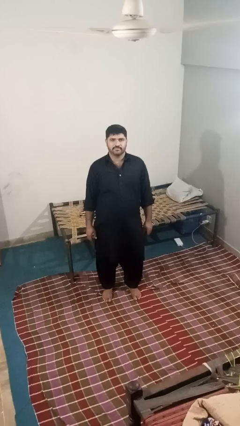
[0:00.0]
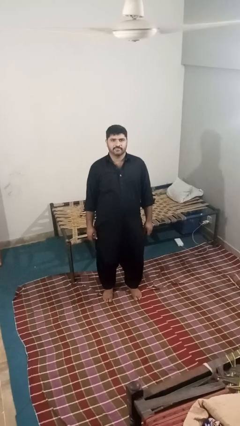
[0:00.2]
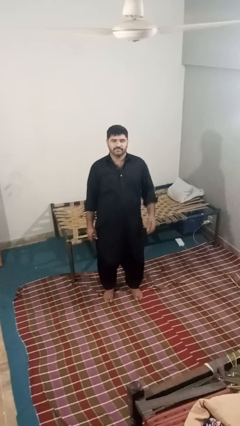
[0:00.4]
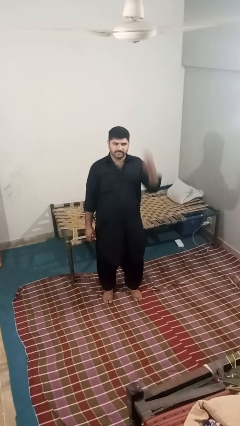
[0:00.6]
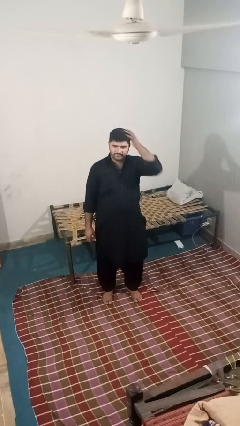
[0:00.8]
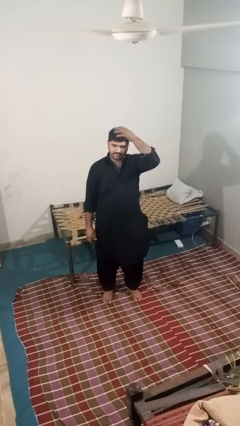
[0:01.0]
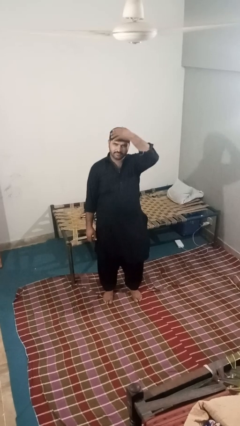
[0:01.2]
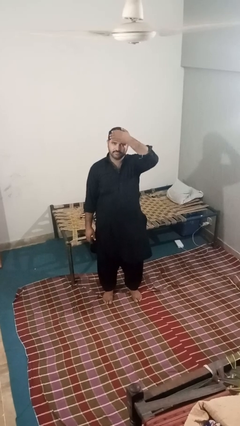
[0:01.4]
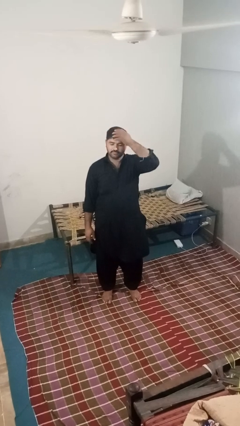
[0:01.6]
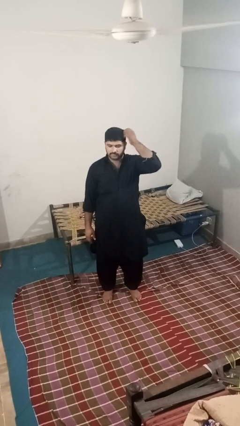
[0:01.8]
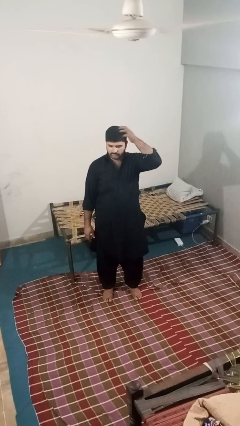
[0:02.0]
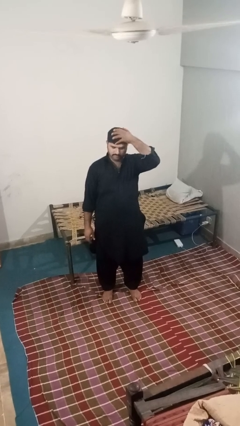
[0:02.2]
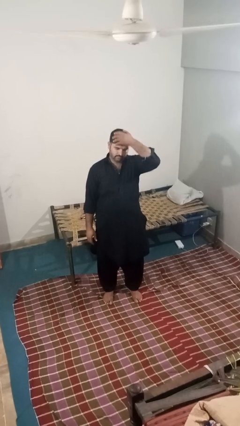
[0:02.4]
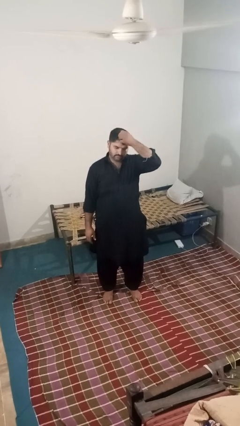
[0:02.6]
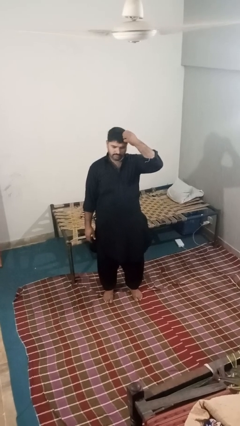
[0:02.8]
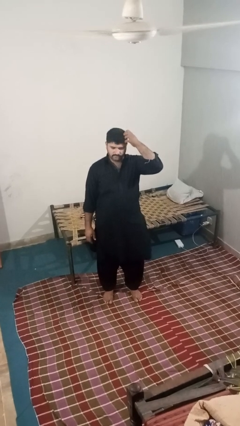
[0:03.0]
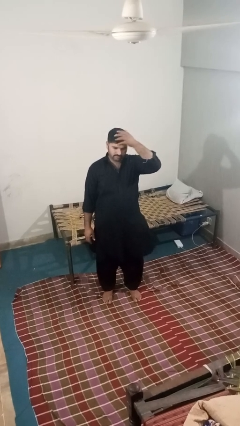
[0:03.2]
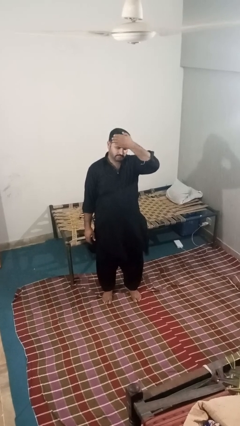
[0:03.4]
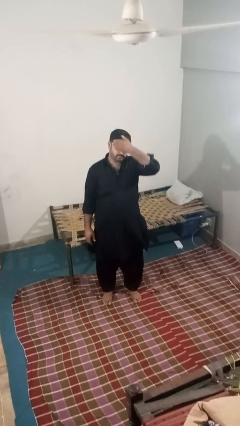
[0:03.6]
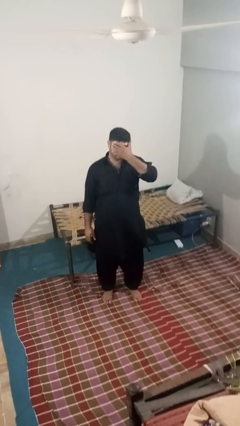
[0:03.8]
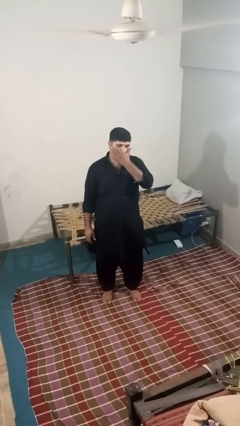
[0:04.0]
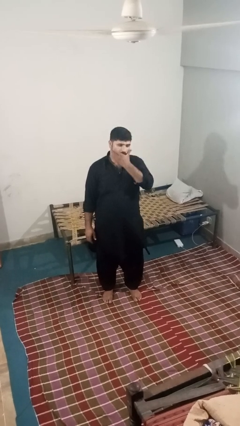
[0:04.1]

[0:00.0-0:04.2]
person scratches face

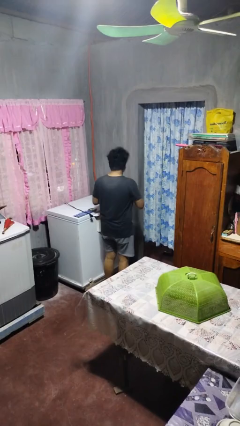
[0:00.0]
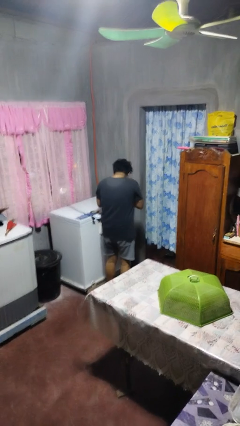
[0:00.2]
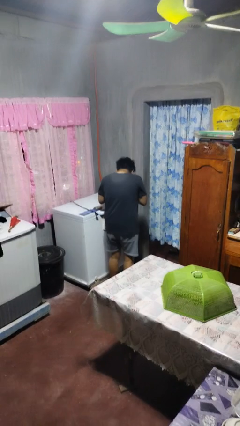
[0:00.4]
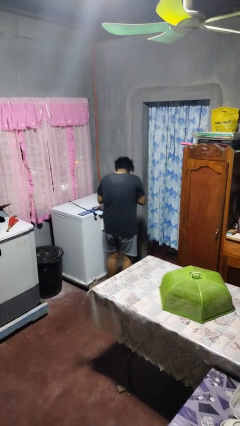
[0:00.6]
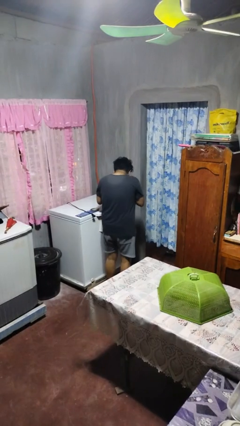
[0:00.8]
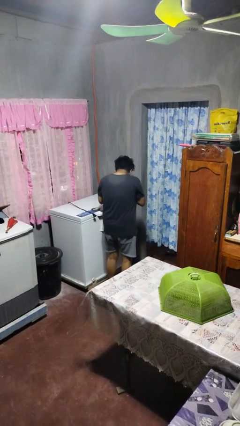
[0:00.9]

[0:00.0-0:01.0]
person sneezes into hand

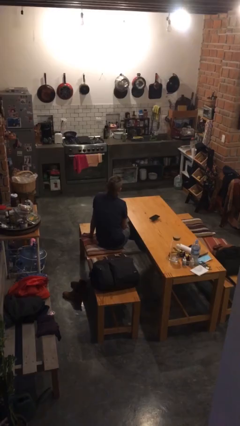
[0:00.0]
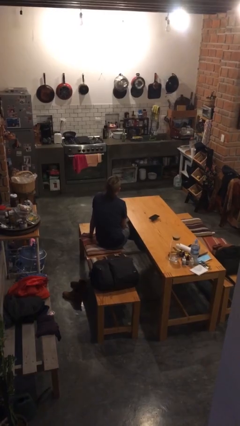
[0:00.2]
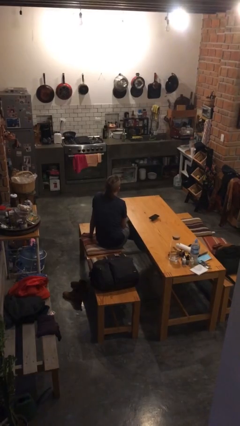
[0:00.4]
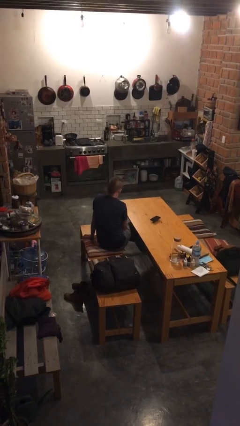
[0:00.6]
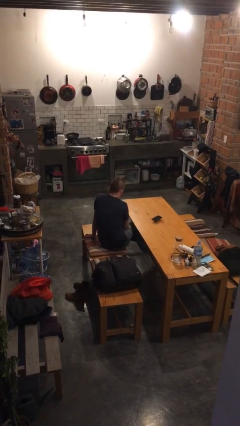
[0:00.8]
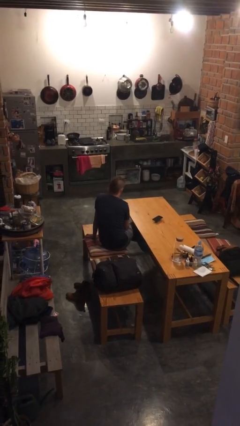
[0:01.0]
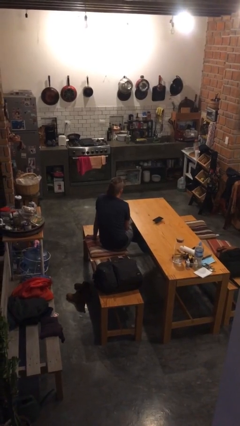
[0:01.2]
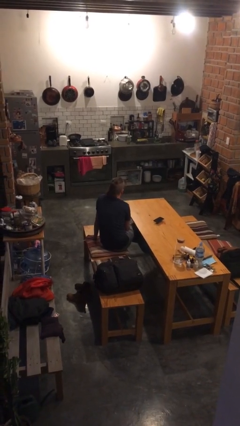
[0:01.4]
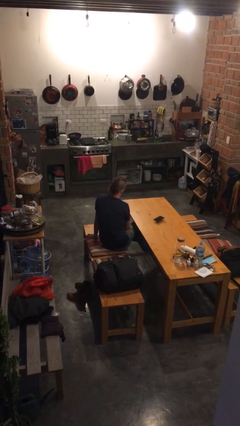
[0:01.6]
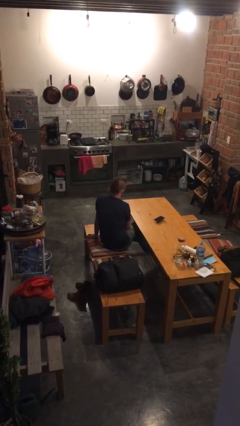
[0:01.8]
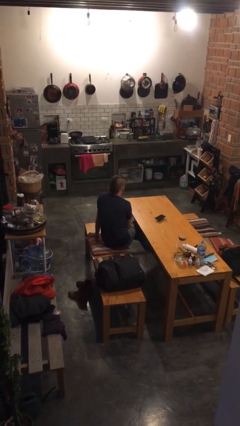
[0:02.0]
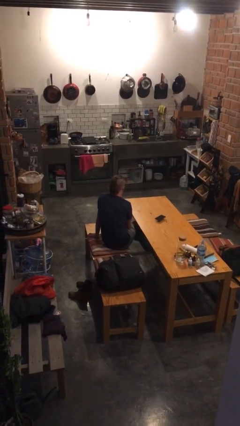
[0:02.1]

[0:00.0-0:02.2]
person nods head

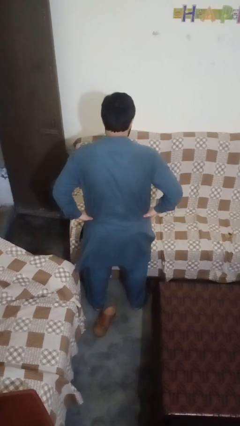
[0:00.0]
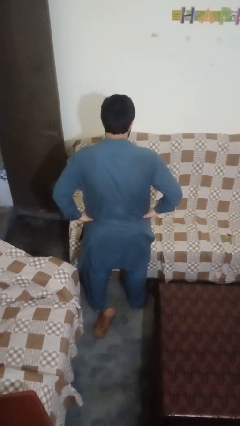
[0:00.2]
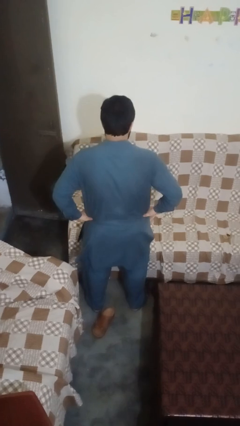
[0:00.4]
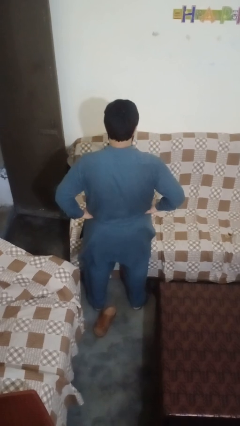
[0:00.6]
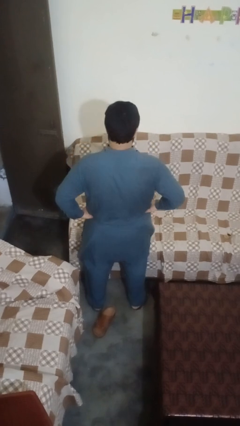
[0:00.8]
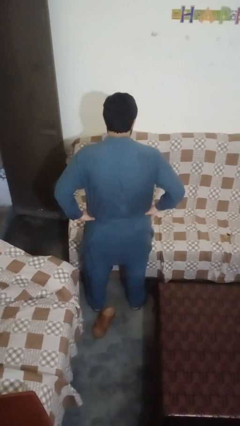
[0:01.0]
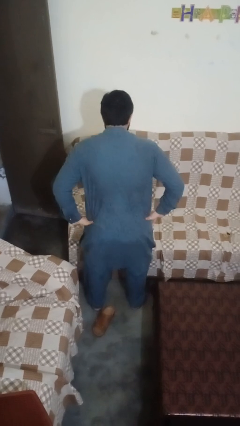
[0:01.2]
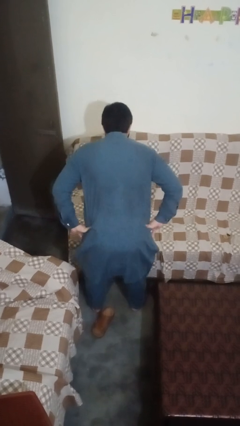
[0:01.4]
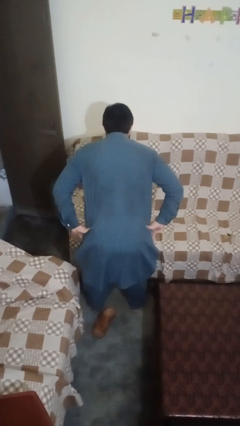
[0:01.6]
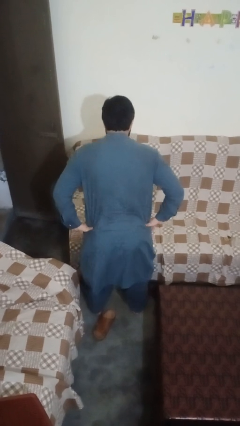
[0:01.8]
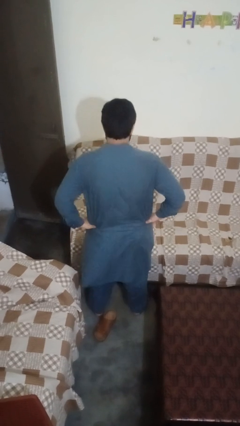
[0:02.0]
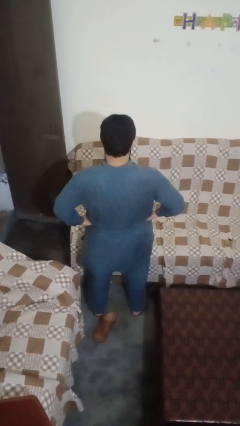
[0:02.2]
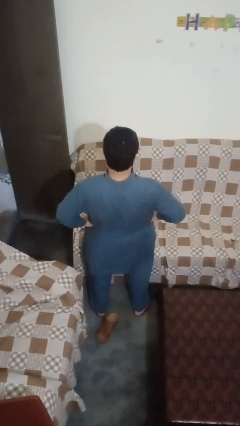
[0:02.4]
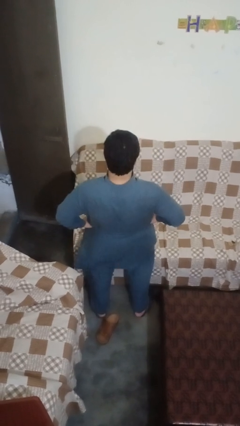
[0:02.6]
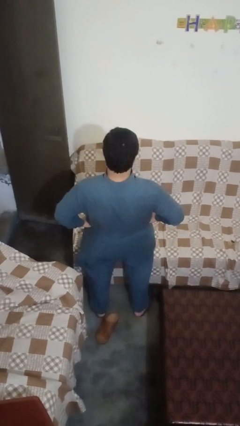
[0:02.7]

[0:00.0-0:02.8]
person wiggles hips

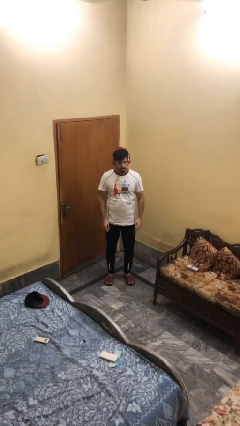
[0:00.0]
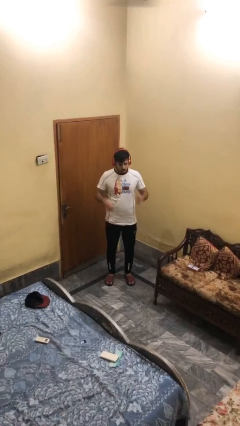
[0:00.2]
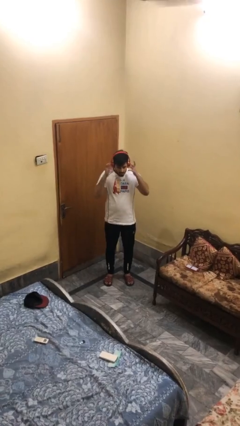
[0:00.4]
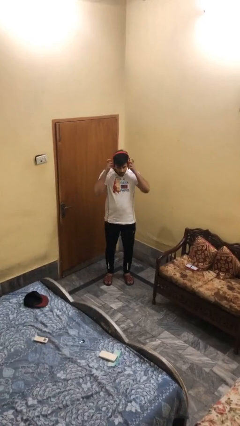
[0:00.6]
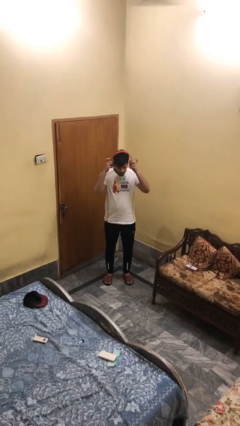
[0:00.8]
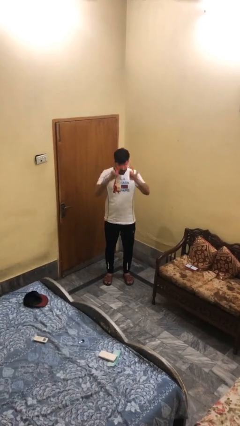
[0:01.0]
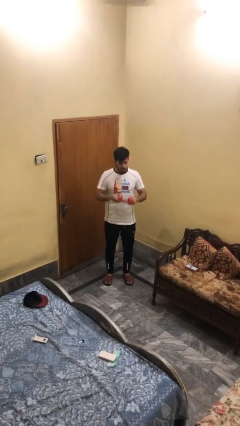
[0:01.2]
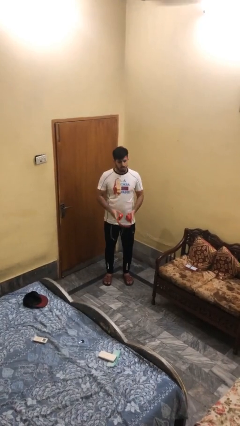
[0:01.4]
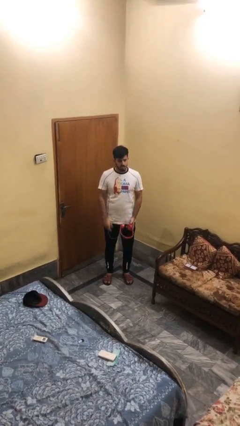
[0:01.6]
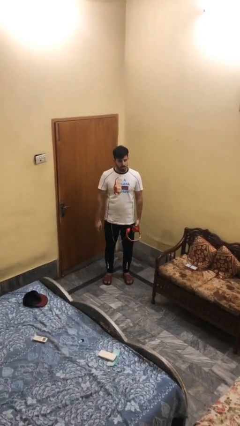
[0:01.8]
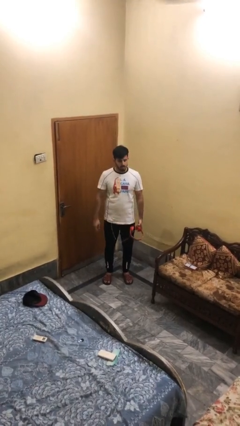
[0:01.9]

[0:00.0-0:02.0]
person takes off headphones

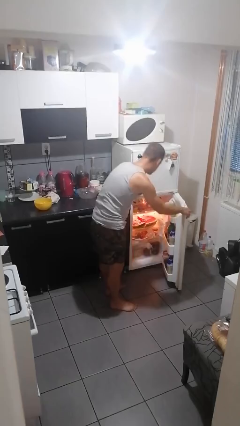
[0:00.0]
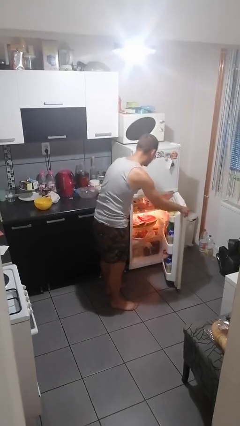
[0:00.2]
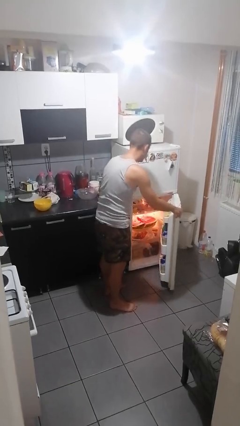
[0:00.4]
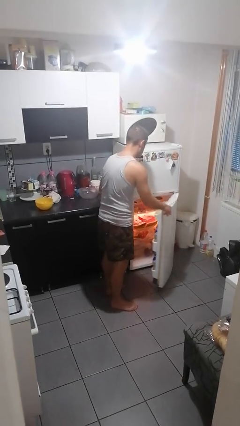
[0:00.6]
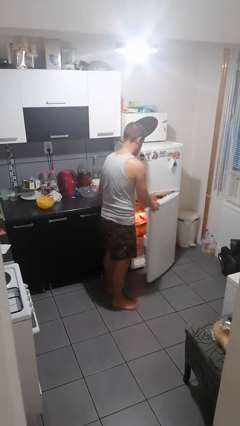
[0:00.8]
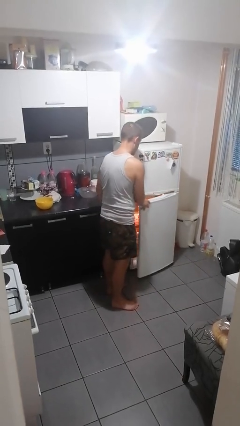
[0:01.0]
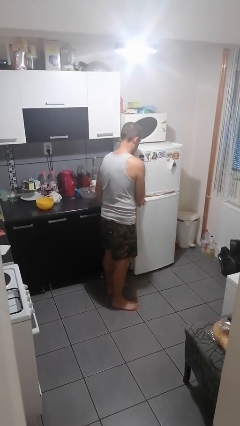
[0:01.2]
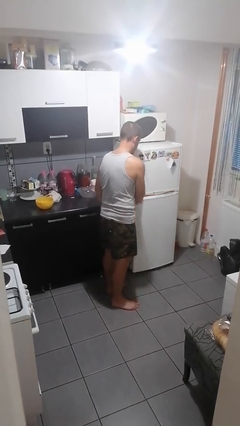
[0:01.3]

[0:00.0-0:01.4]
person closes refrigerator

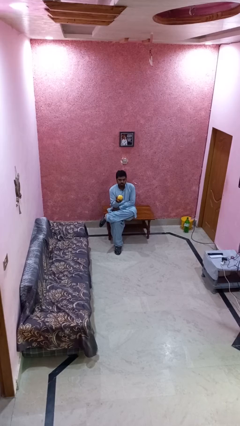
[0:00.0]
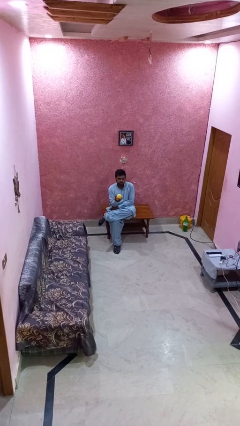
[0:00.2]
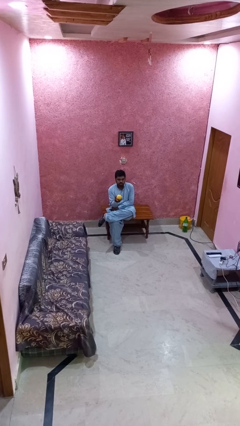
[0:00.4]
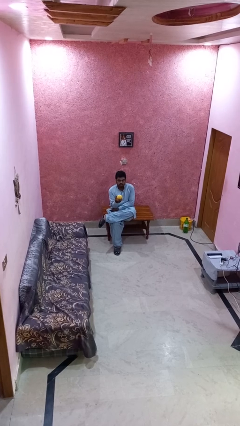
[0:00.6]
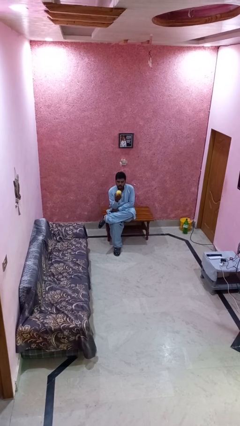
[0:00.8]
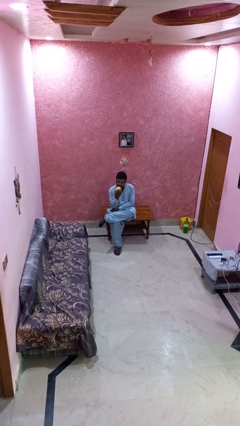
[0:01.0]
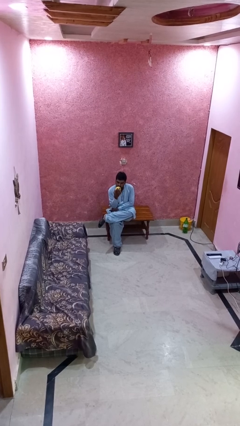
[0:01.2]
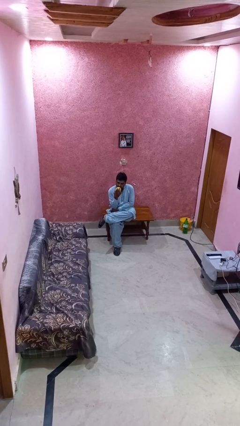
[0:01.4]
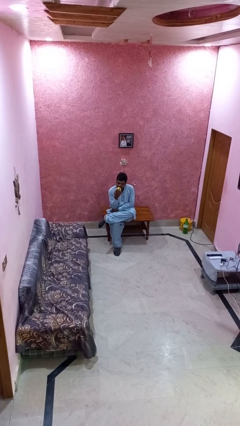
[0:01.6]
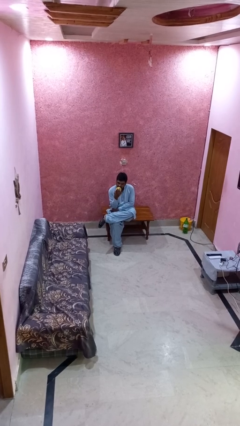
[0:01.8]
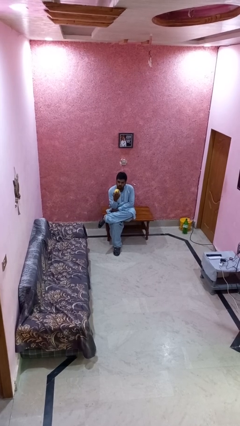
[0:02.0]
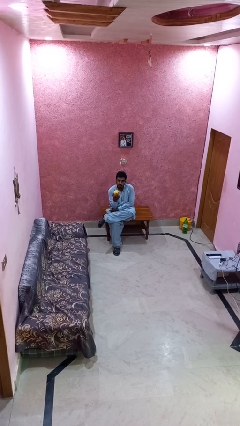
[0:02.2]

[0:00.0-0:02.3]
person eats apple

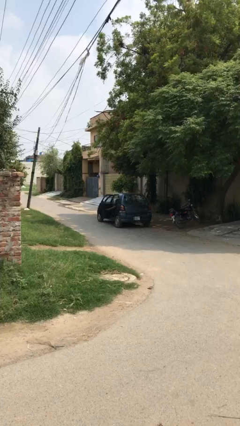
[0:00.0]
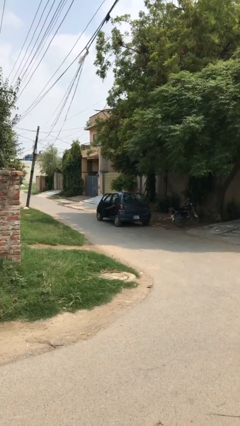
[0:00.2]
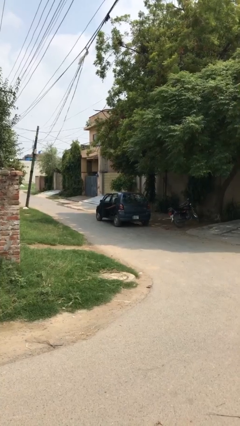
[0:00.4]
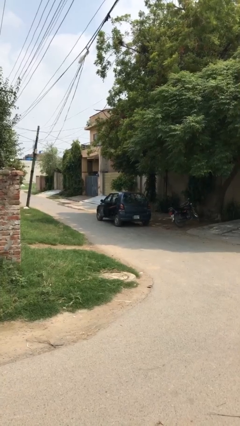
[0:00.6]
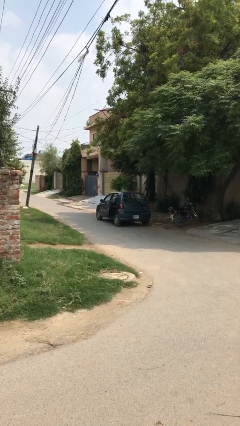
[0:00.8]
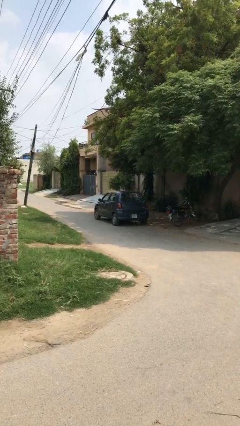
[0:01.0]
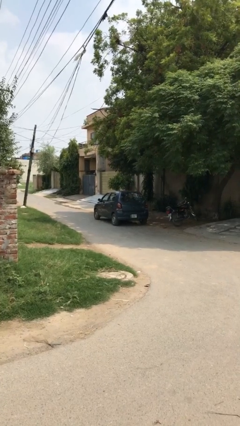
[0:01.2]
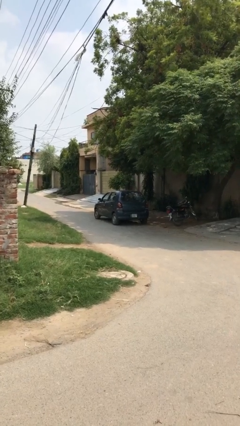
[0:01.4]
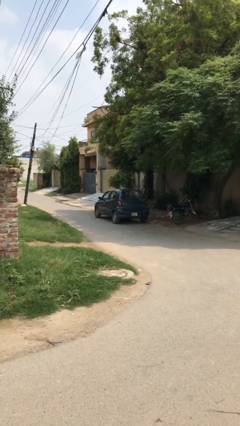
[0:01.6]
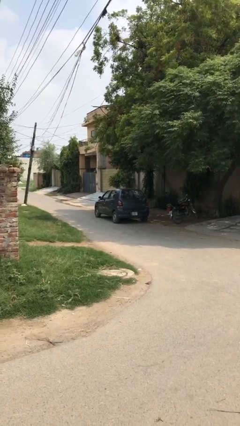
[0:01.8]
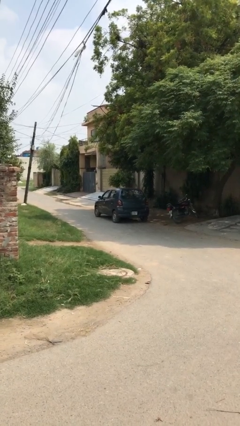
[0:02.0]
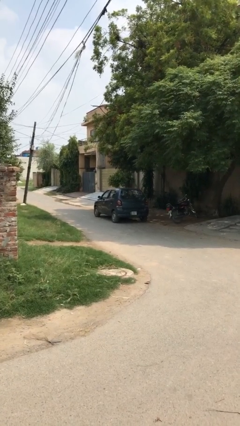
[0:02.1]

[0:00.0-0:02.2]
person closes car door